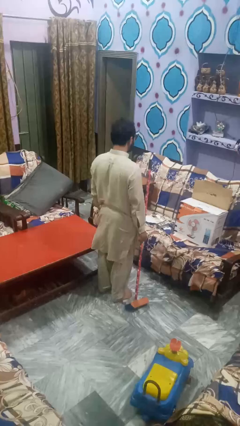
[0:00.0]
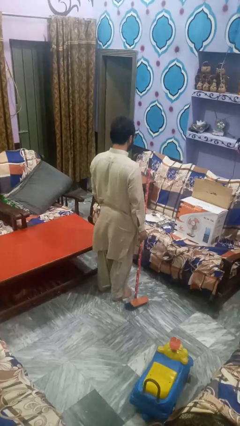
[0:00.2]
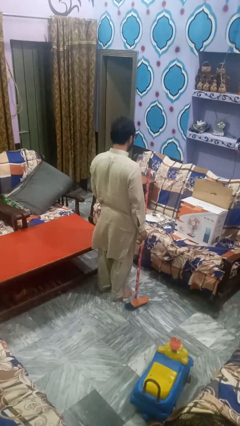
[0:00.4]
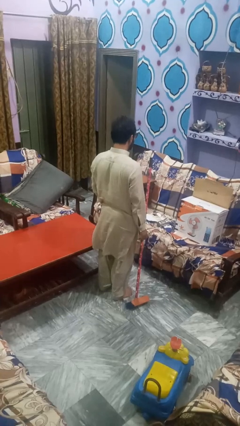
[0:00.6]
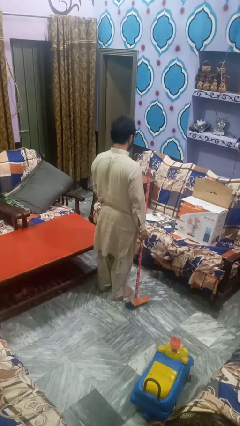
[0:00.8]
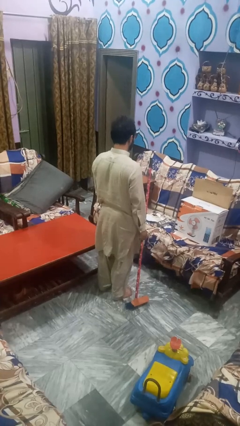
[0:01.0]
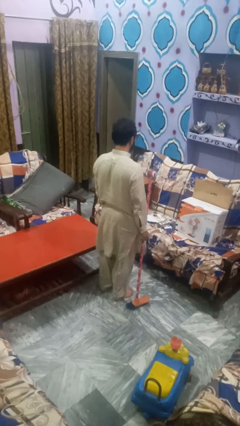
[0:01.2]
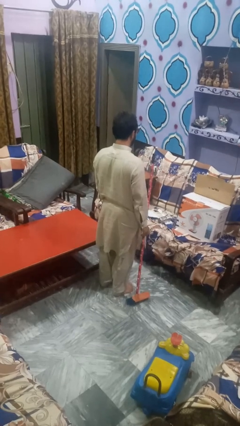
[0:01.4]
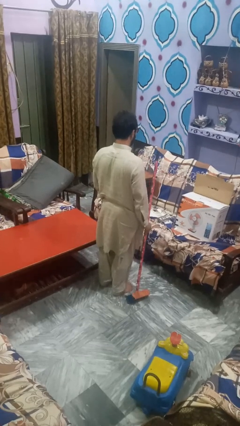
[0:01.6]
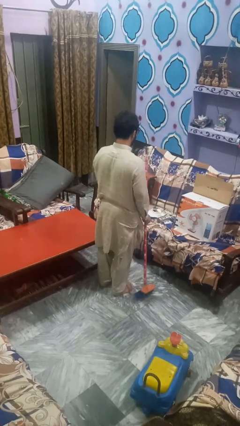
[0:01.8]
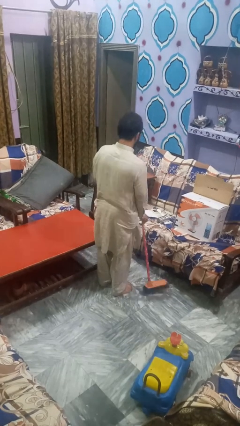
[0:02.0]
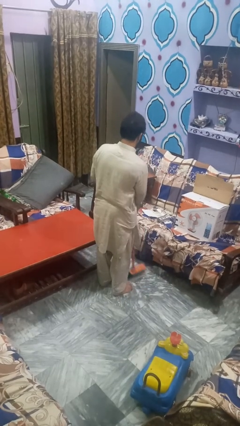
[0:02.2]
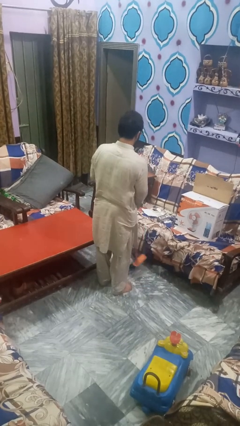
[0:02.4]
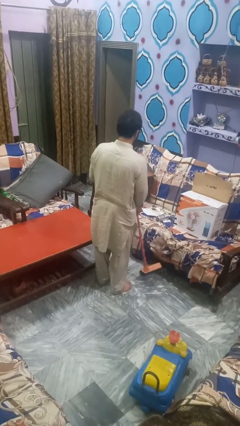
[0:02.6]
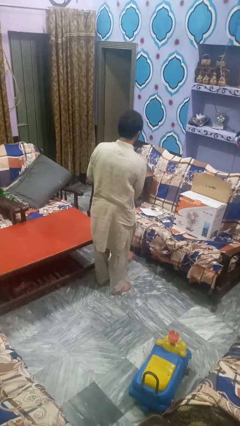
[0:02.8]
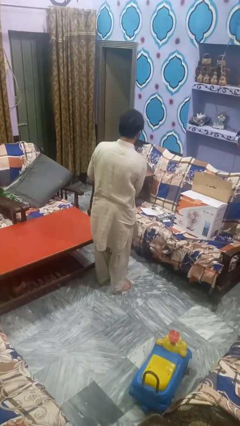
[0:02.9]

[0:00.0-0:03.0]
person mops

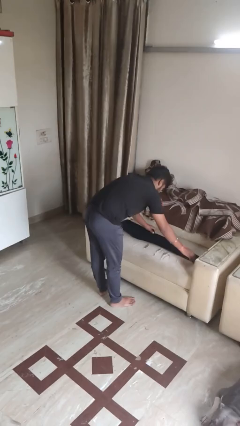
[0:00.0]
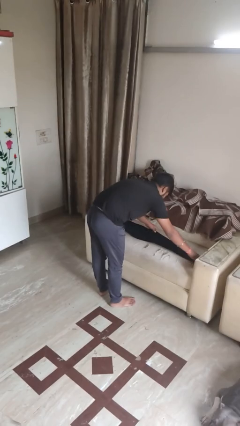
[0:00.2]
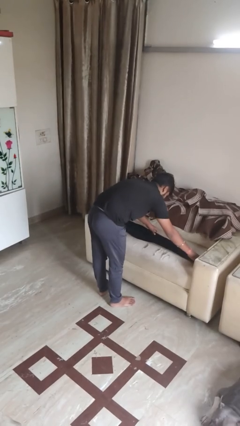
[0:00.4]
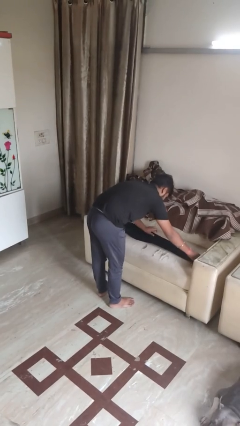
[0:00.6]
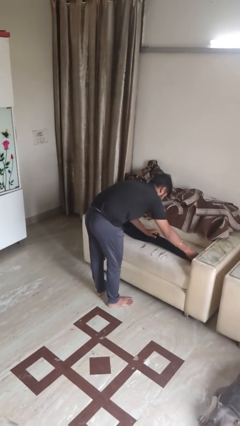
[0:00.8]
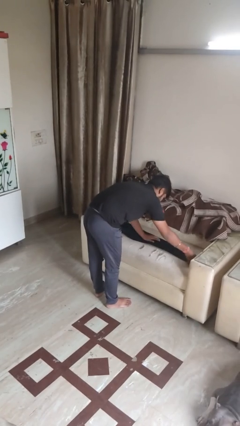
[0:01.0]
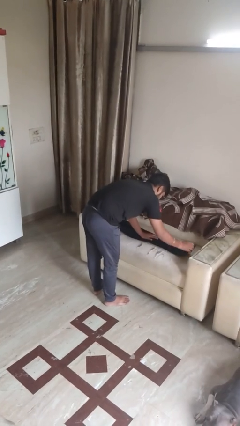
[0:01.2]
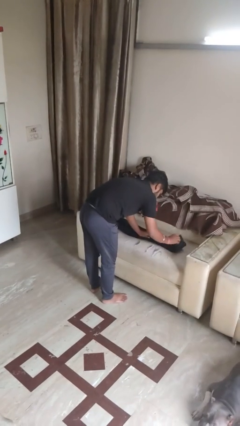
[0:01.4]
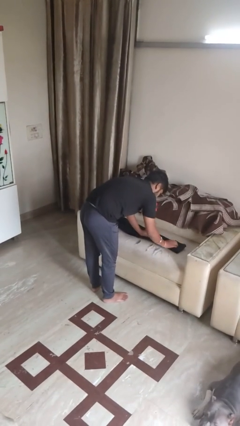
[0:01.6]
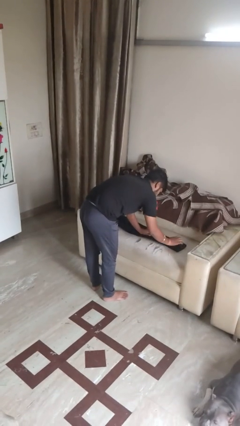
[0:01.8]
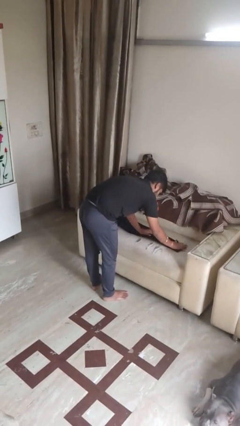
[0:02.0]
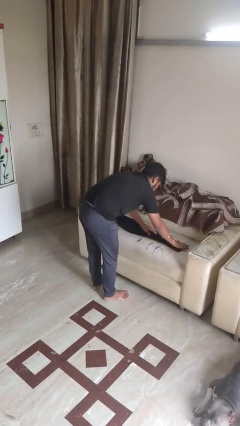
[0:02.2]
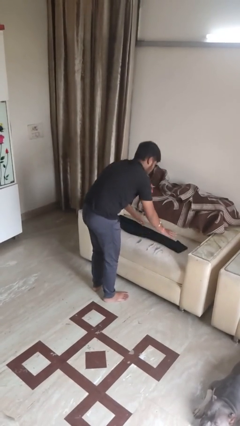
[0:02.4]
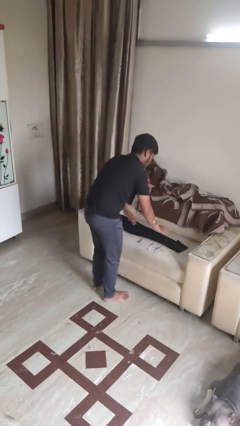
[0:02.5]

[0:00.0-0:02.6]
person folds pants

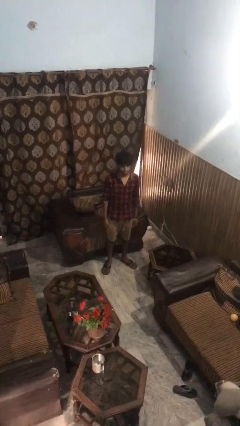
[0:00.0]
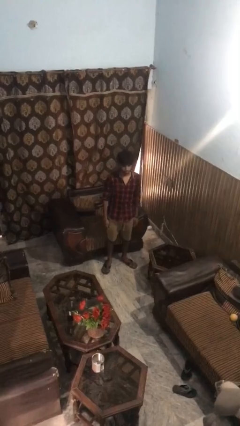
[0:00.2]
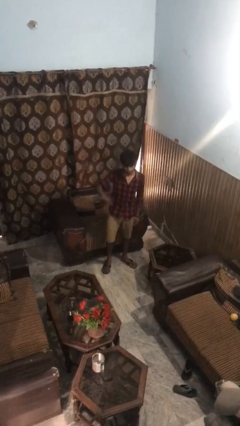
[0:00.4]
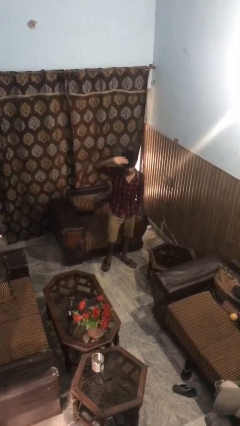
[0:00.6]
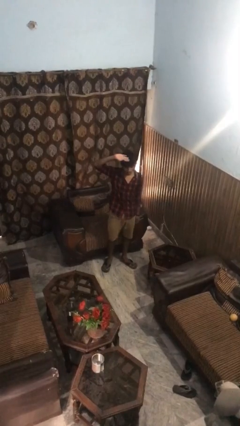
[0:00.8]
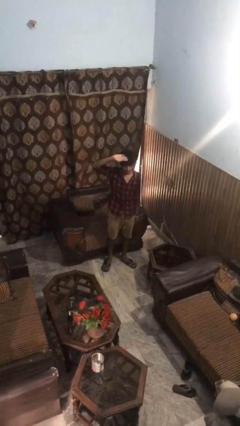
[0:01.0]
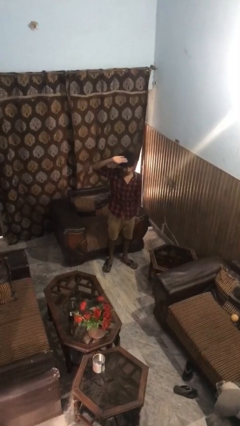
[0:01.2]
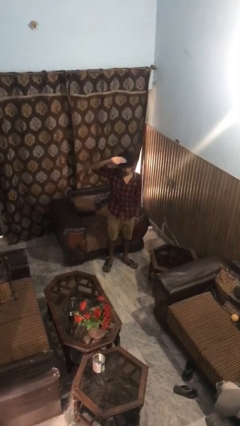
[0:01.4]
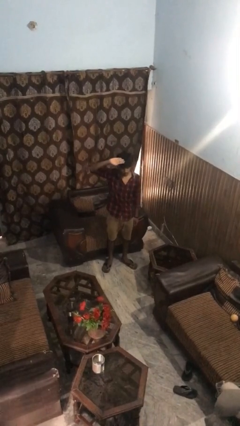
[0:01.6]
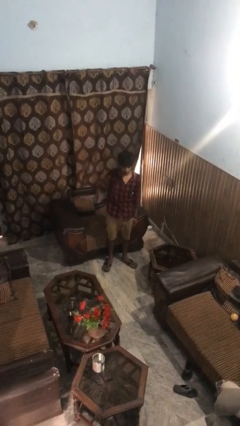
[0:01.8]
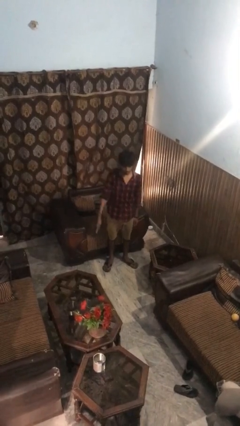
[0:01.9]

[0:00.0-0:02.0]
person salutes

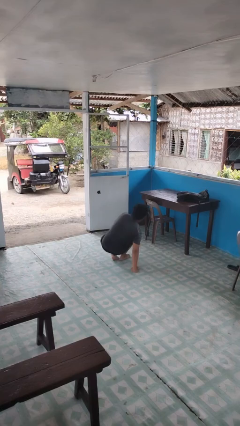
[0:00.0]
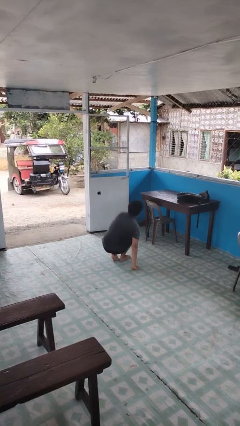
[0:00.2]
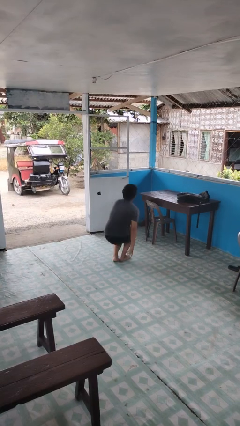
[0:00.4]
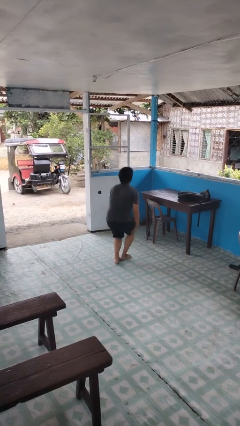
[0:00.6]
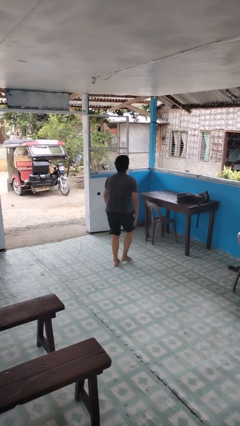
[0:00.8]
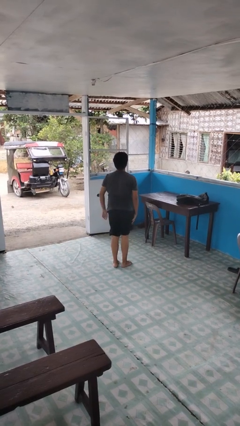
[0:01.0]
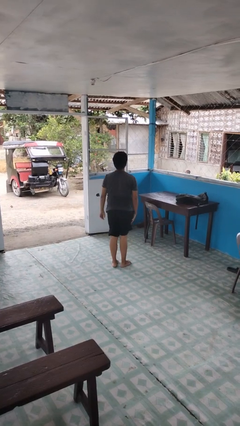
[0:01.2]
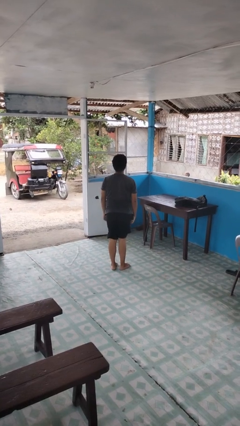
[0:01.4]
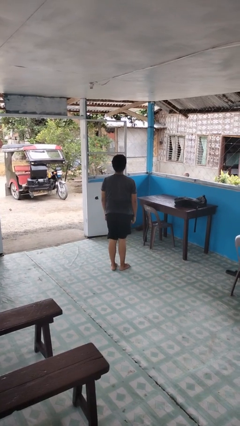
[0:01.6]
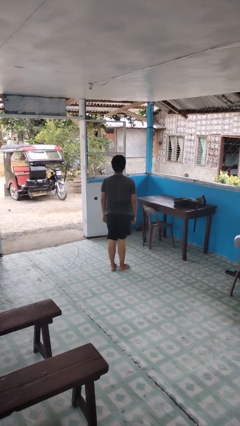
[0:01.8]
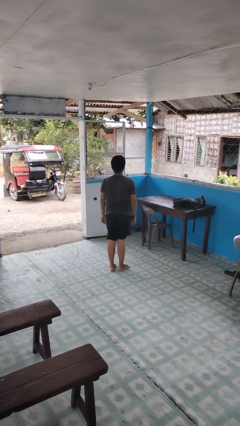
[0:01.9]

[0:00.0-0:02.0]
person stands up from floor

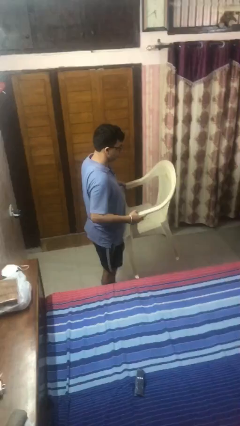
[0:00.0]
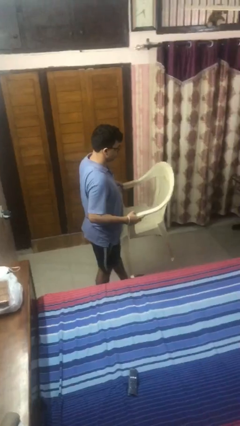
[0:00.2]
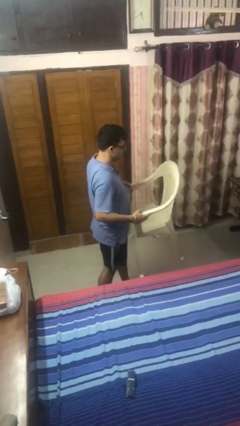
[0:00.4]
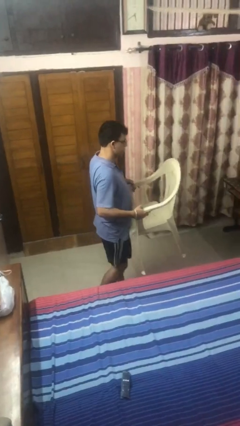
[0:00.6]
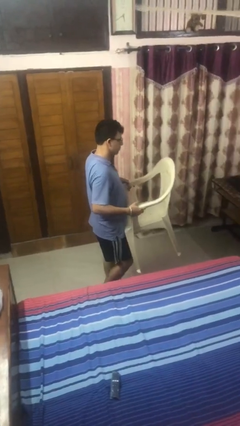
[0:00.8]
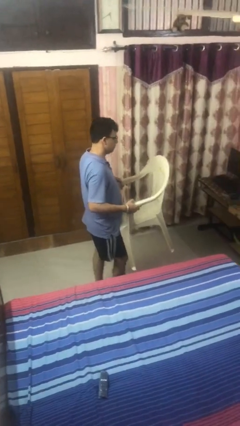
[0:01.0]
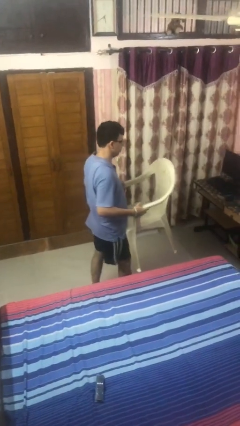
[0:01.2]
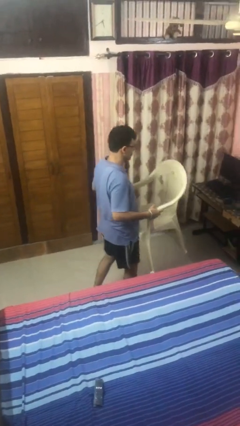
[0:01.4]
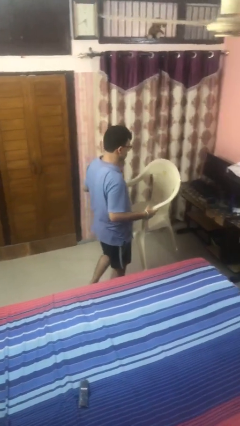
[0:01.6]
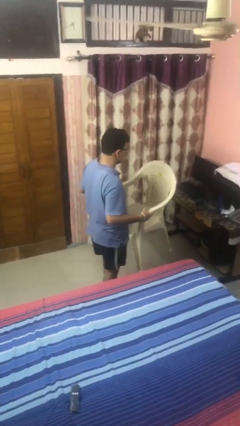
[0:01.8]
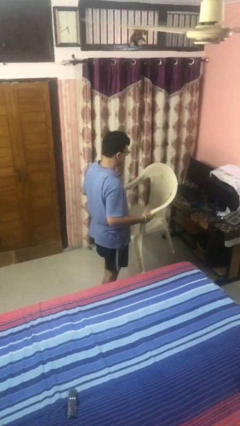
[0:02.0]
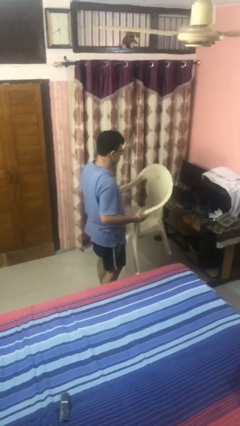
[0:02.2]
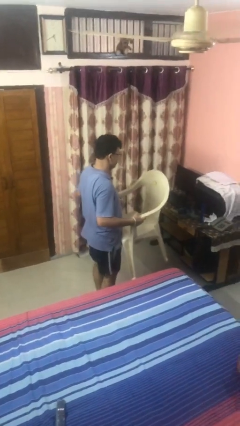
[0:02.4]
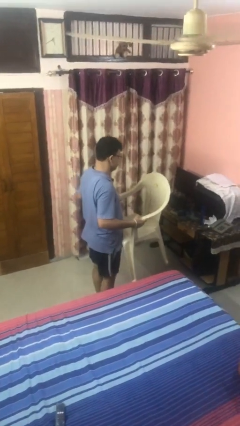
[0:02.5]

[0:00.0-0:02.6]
person carries furniture

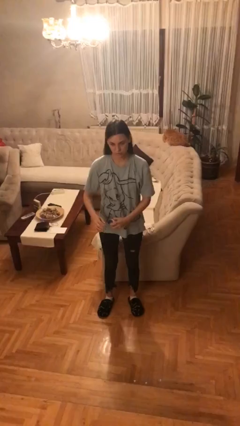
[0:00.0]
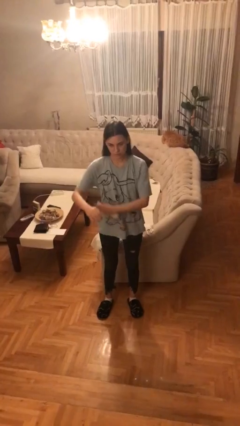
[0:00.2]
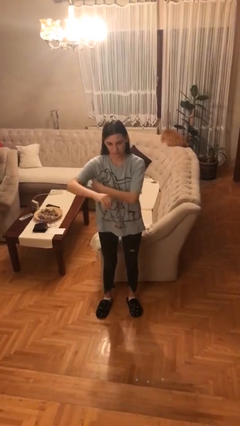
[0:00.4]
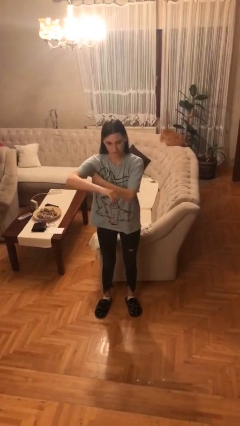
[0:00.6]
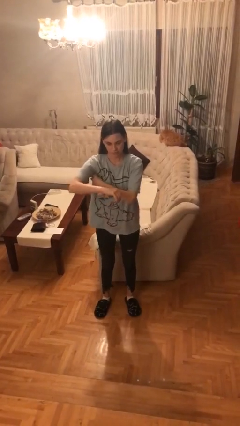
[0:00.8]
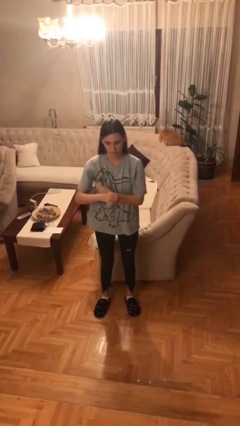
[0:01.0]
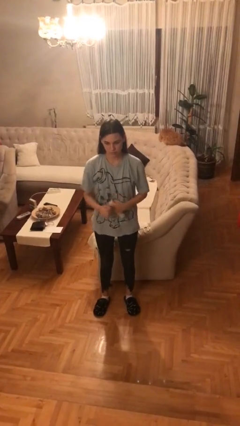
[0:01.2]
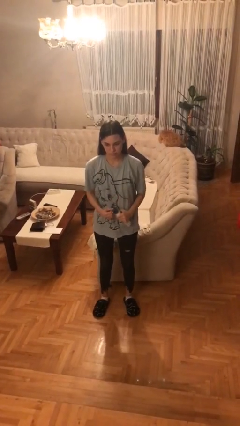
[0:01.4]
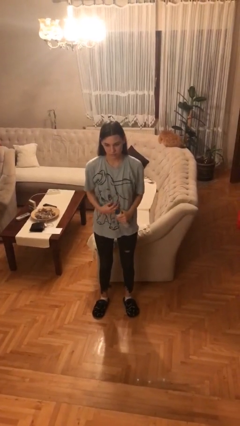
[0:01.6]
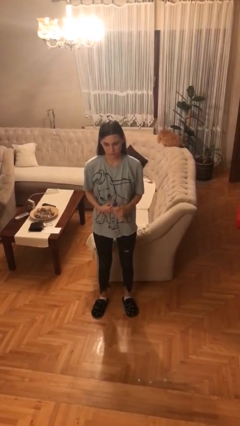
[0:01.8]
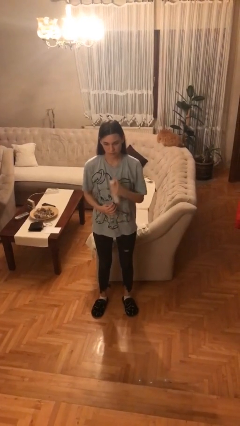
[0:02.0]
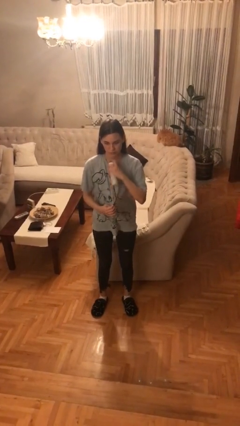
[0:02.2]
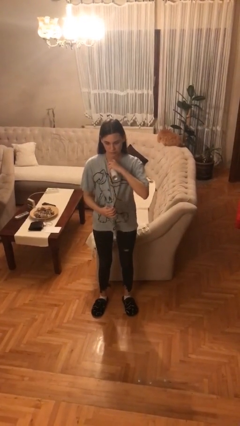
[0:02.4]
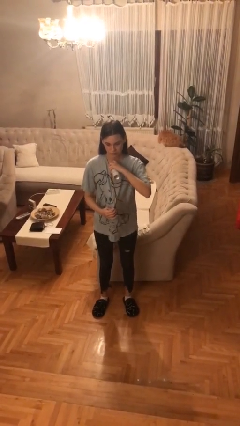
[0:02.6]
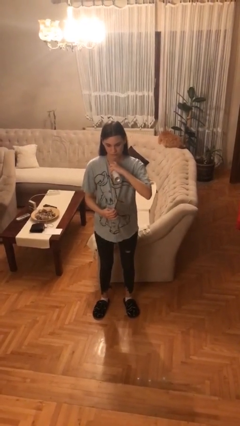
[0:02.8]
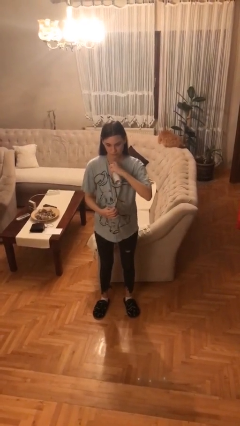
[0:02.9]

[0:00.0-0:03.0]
person applies deodorant

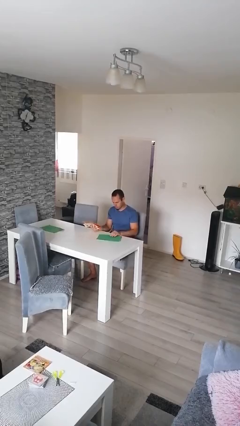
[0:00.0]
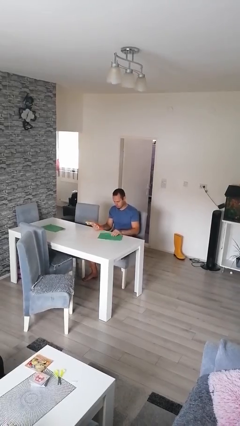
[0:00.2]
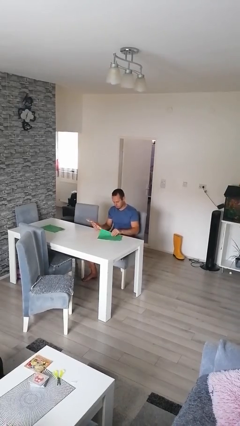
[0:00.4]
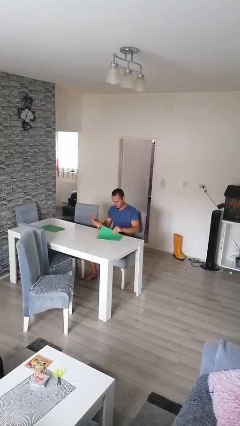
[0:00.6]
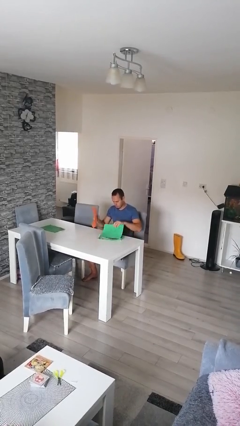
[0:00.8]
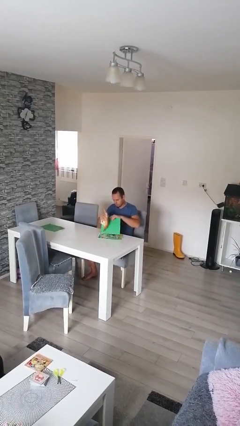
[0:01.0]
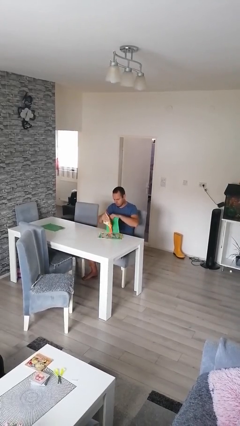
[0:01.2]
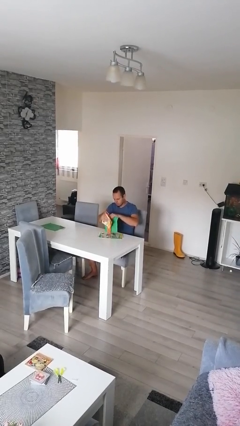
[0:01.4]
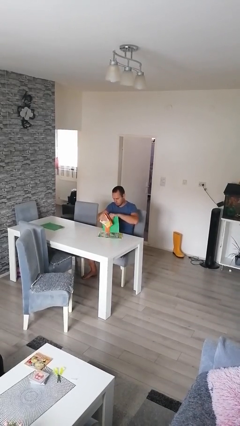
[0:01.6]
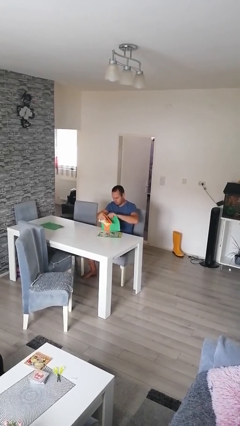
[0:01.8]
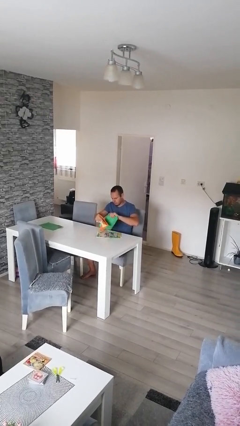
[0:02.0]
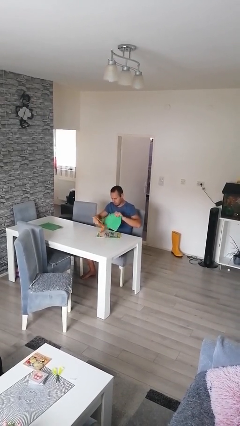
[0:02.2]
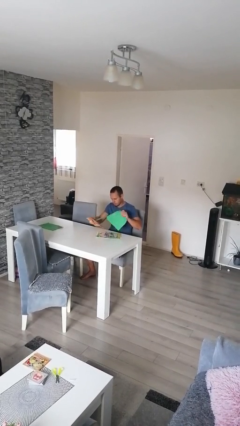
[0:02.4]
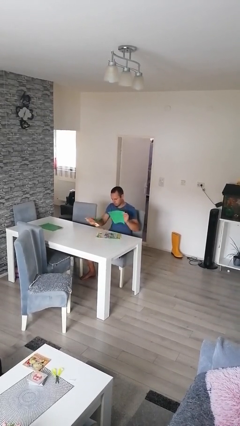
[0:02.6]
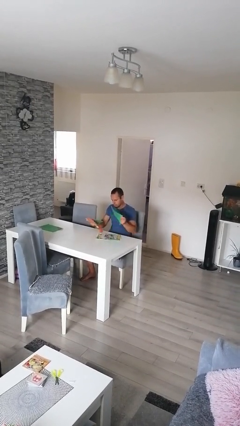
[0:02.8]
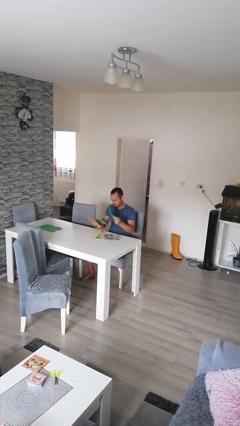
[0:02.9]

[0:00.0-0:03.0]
person tears paper
